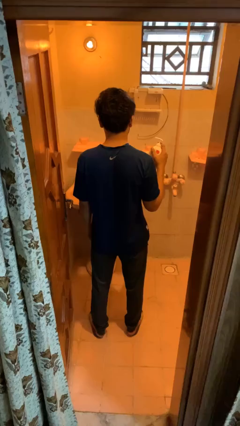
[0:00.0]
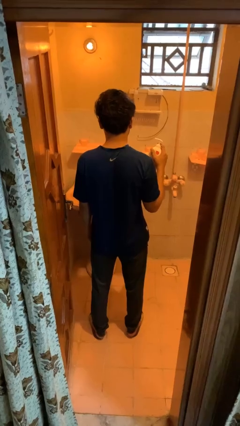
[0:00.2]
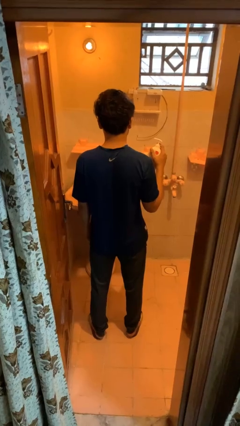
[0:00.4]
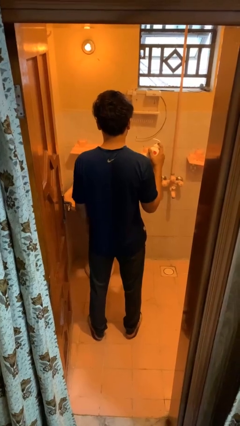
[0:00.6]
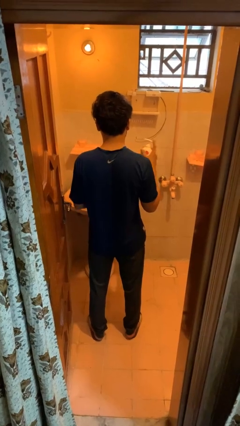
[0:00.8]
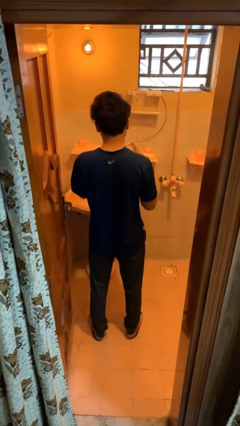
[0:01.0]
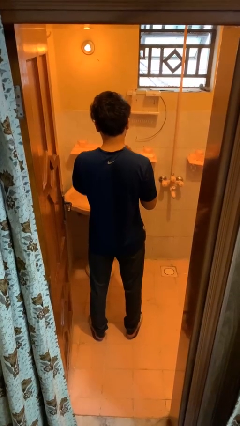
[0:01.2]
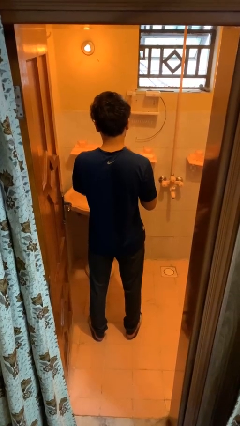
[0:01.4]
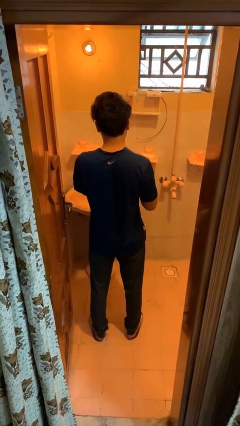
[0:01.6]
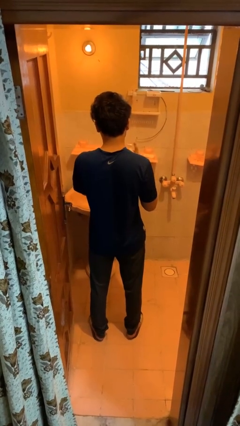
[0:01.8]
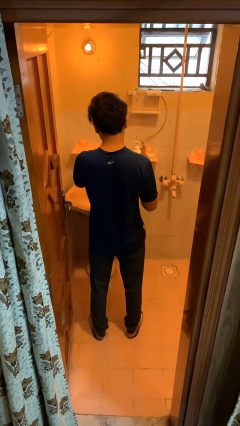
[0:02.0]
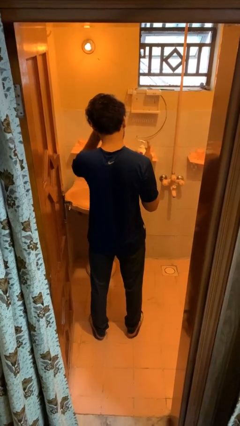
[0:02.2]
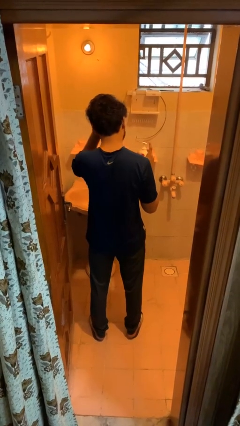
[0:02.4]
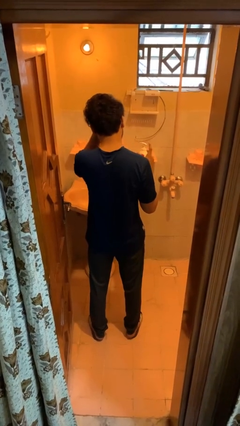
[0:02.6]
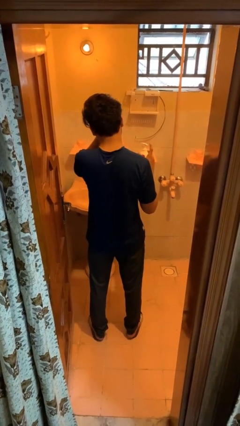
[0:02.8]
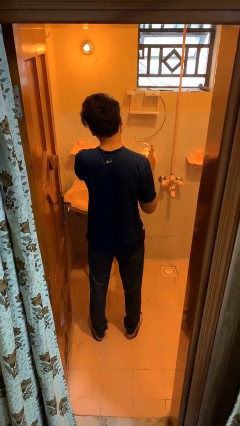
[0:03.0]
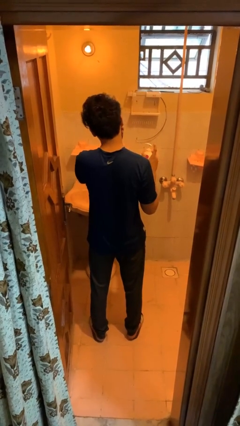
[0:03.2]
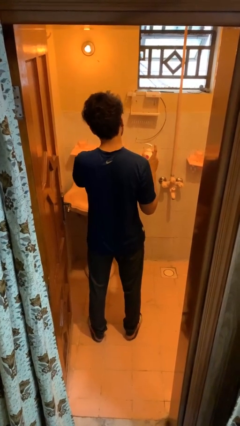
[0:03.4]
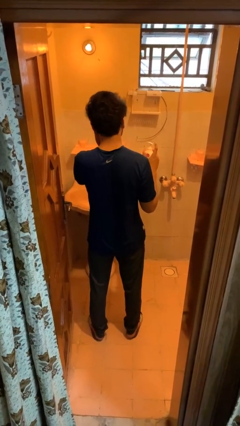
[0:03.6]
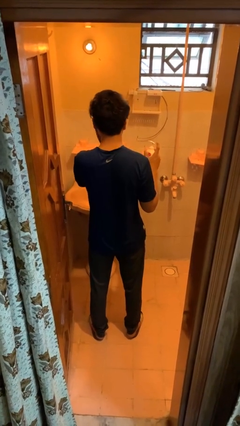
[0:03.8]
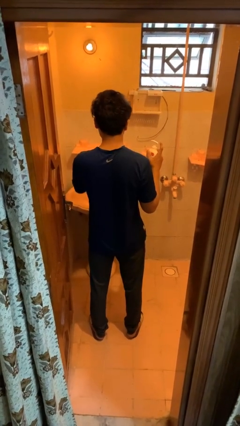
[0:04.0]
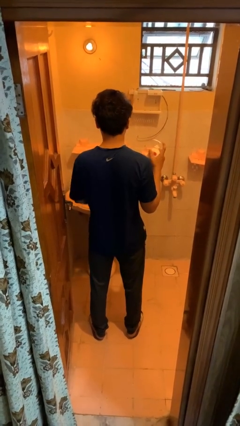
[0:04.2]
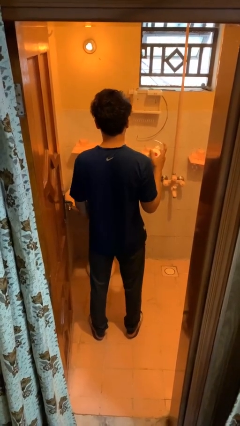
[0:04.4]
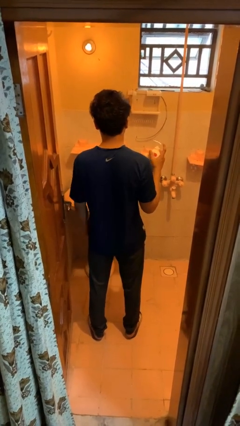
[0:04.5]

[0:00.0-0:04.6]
person applies sunscreen

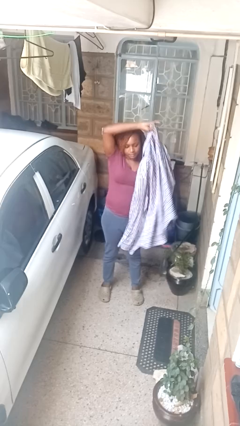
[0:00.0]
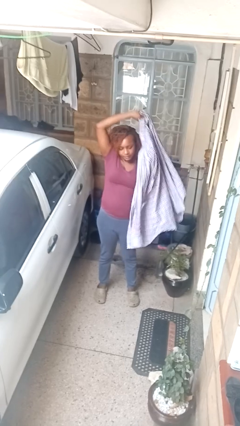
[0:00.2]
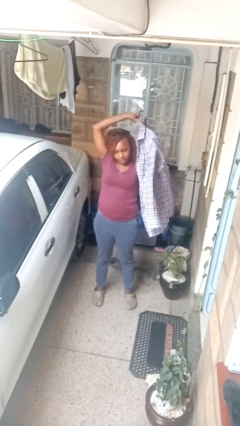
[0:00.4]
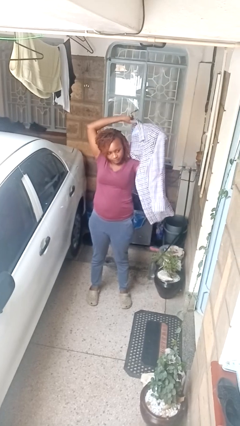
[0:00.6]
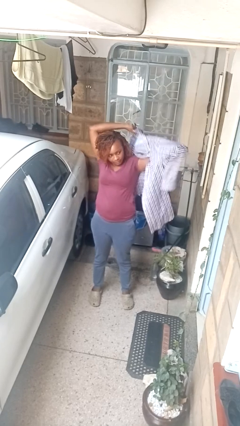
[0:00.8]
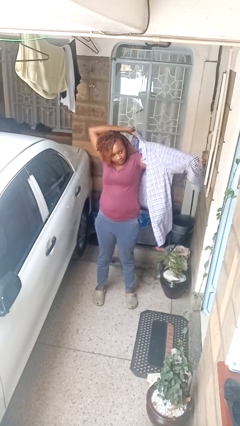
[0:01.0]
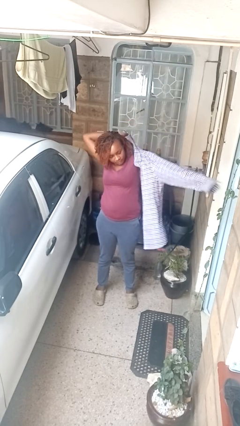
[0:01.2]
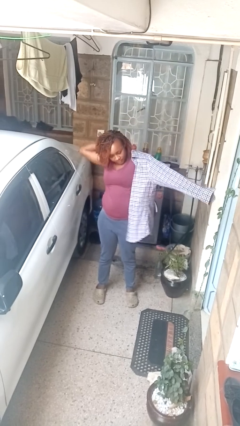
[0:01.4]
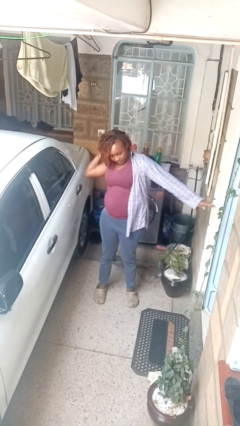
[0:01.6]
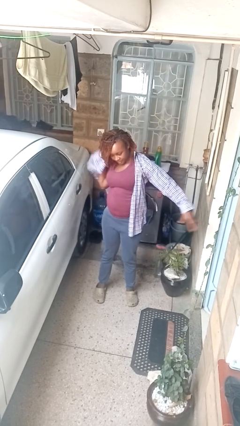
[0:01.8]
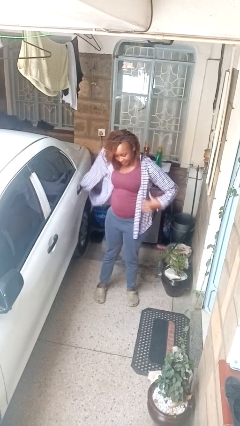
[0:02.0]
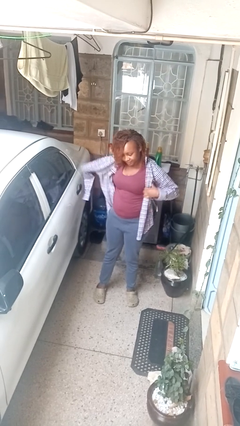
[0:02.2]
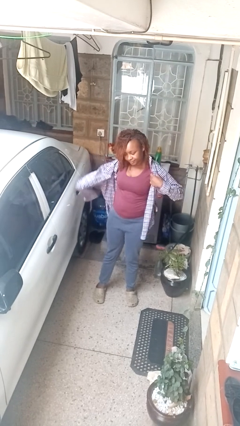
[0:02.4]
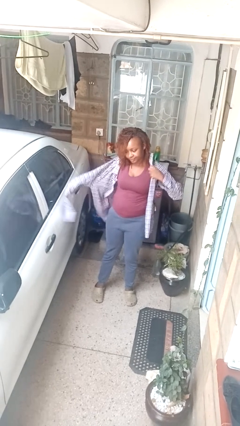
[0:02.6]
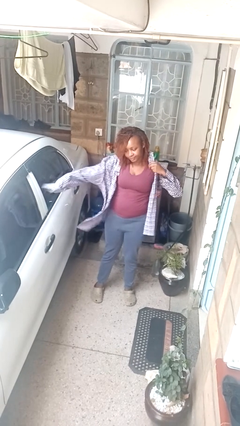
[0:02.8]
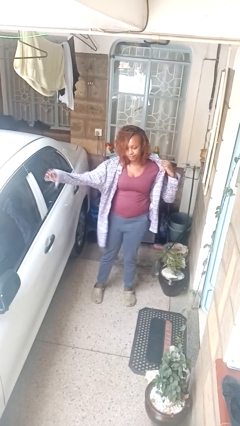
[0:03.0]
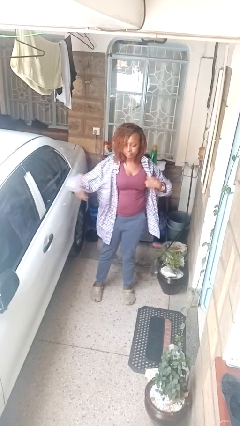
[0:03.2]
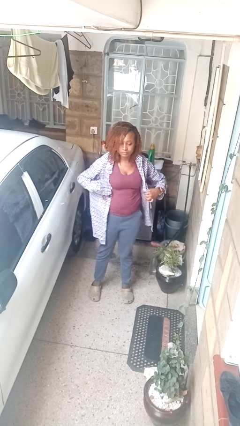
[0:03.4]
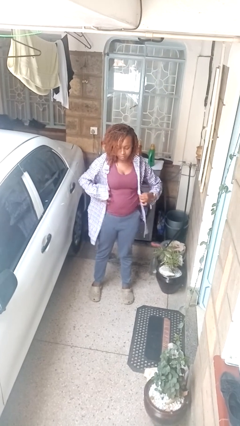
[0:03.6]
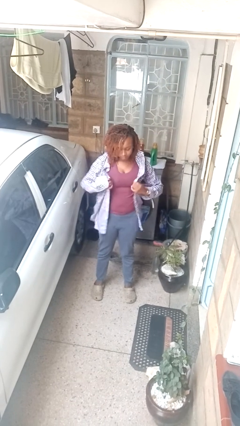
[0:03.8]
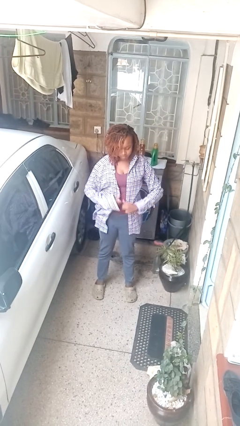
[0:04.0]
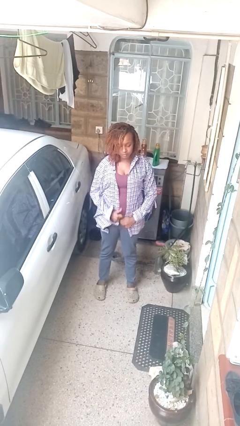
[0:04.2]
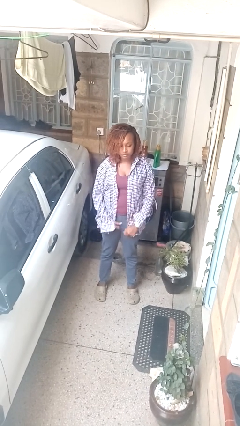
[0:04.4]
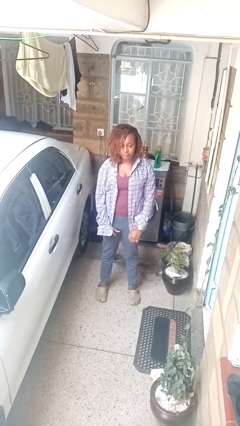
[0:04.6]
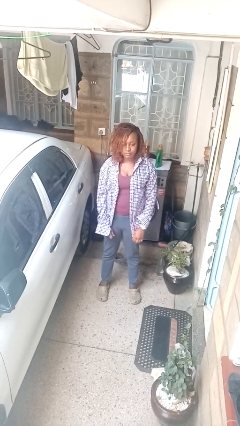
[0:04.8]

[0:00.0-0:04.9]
person puts on shirt

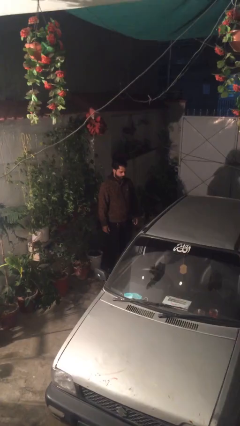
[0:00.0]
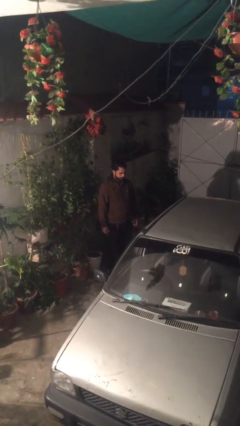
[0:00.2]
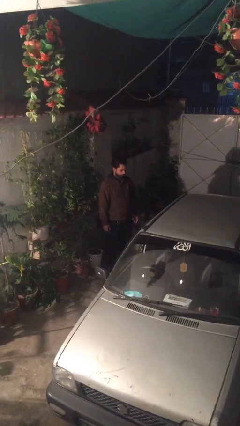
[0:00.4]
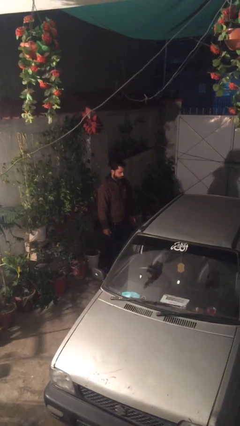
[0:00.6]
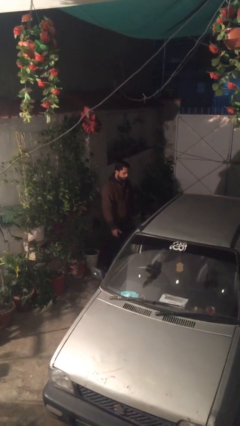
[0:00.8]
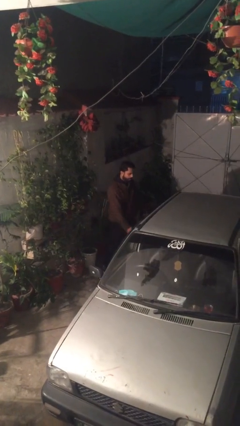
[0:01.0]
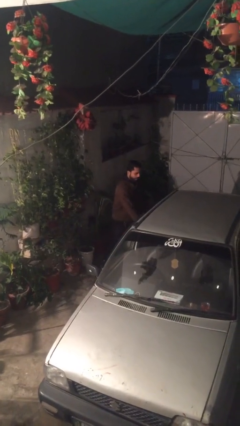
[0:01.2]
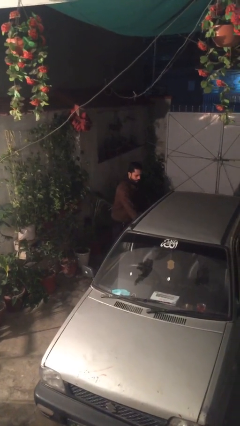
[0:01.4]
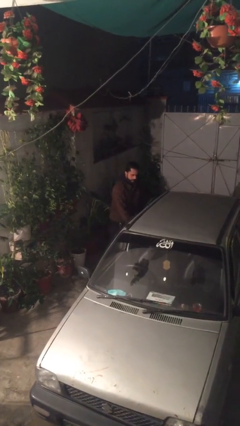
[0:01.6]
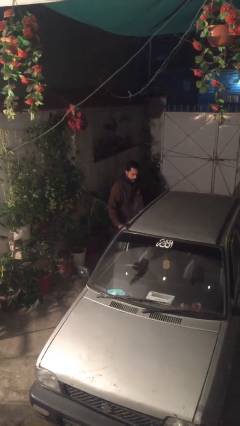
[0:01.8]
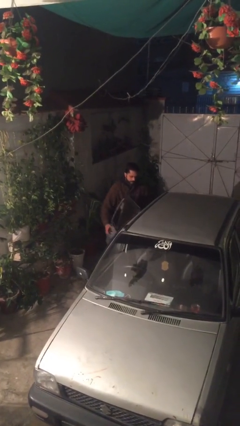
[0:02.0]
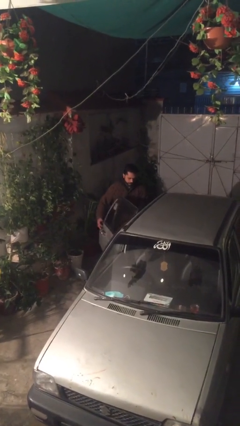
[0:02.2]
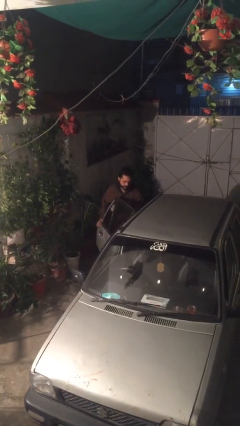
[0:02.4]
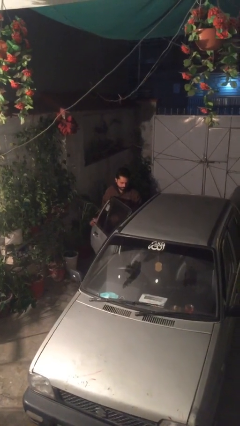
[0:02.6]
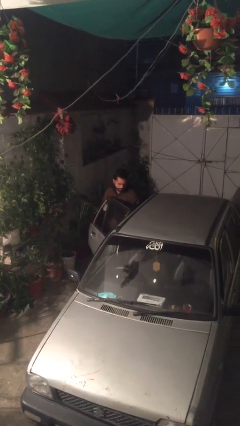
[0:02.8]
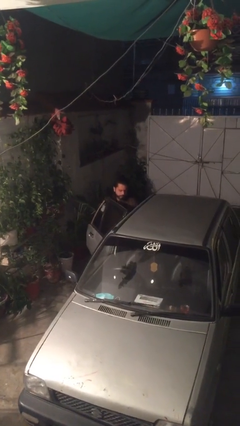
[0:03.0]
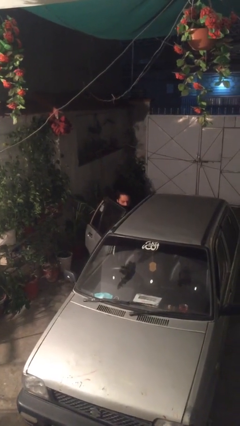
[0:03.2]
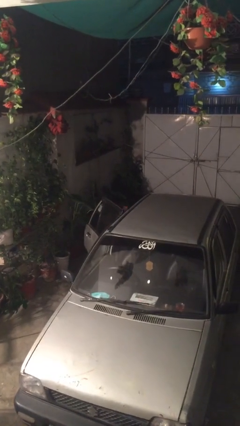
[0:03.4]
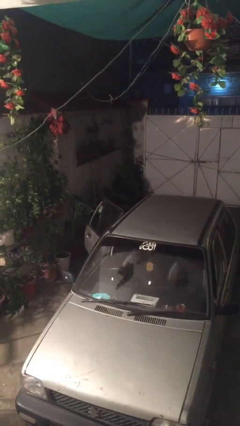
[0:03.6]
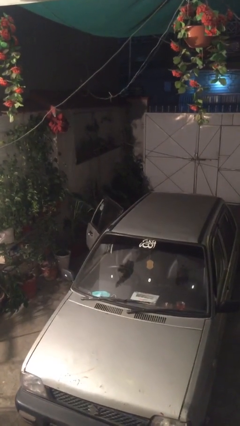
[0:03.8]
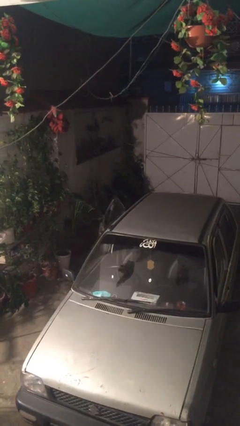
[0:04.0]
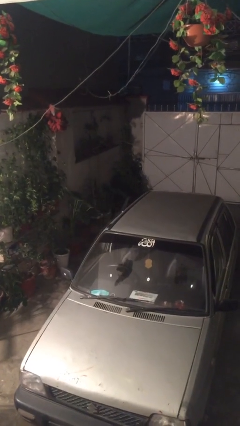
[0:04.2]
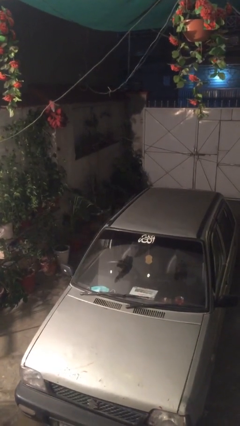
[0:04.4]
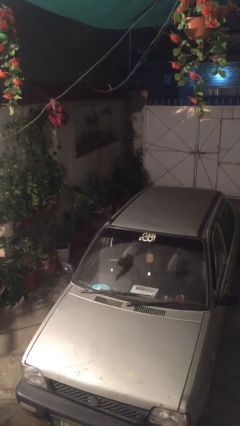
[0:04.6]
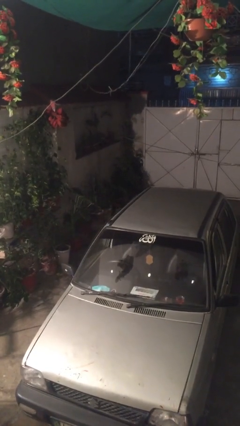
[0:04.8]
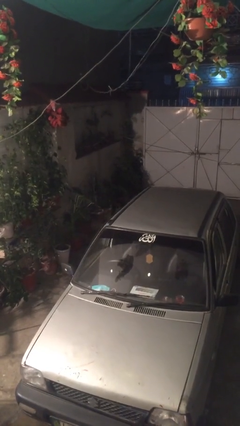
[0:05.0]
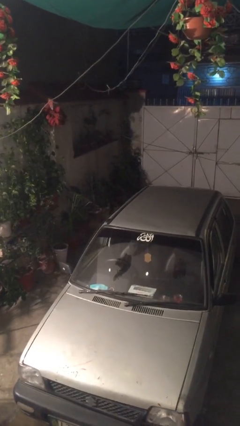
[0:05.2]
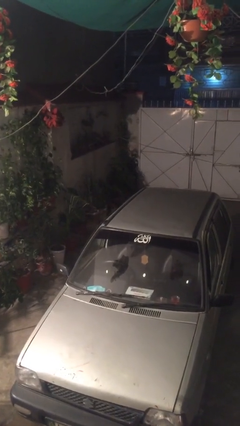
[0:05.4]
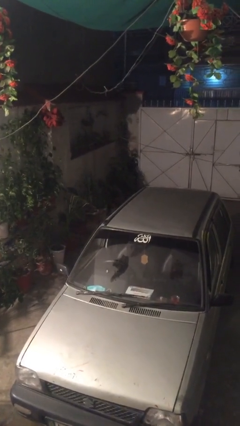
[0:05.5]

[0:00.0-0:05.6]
car picks up person

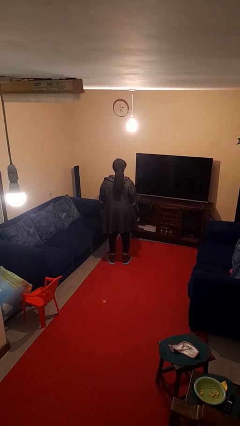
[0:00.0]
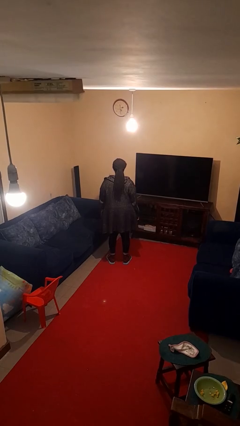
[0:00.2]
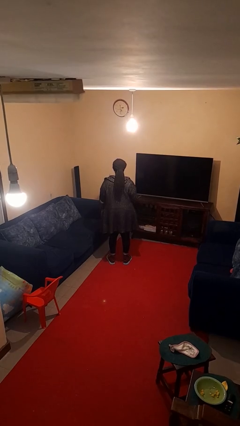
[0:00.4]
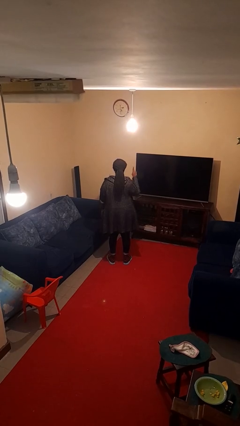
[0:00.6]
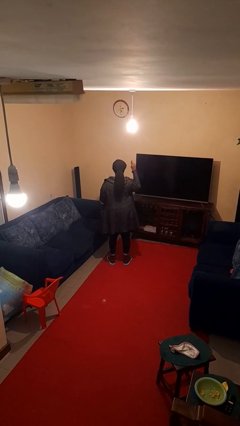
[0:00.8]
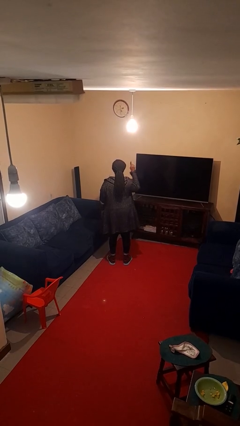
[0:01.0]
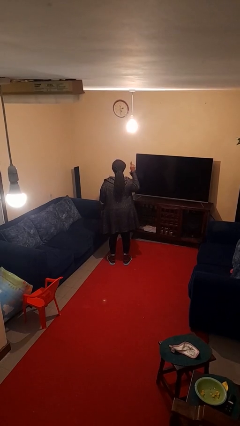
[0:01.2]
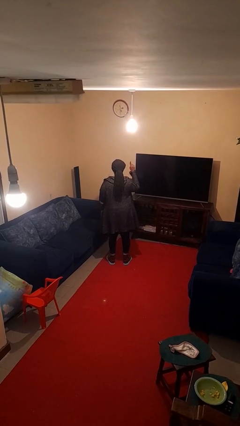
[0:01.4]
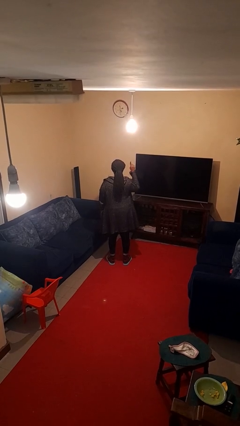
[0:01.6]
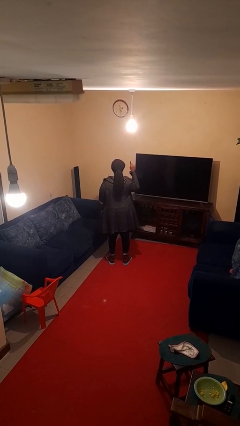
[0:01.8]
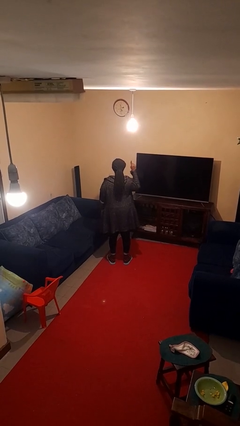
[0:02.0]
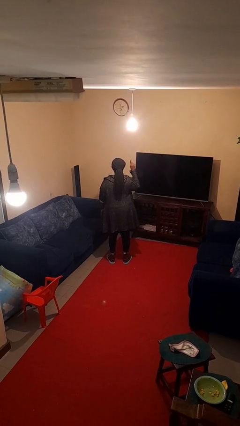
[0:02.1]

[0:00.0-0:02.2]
person gestures number one

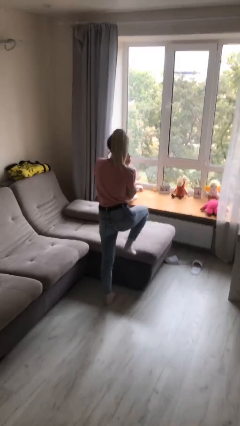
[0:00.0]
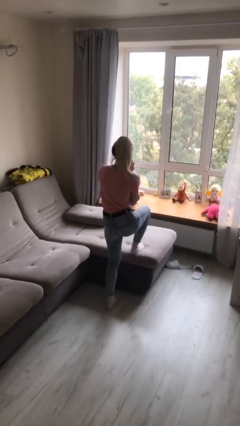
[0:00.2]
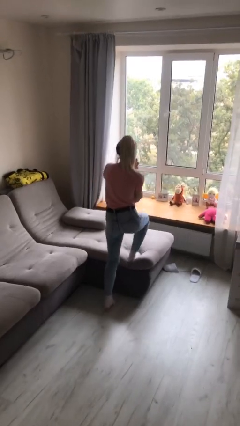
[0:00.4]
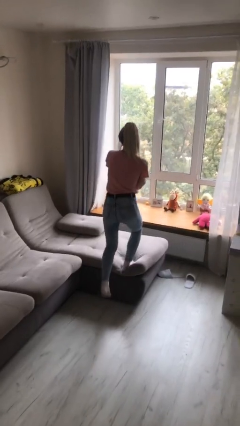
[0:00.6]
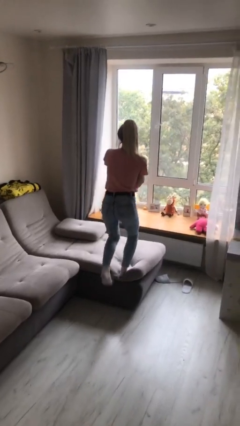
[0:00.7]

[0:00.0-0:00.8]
person climbs on couch
